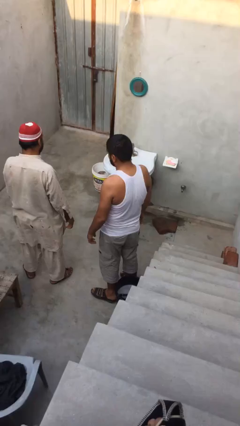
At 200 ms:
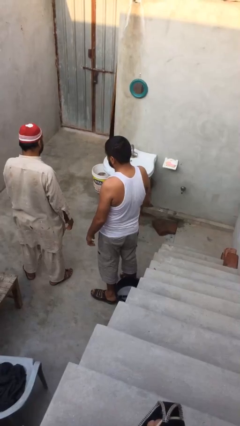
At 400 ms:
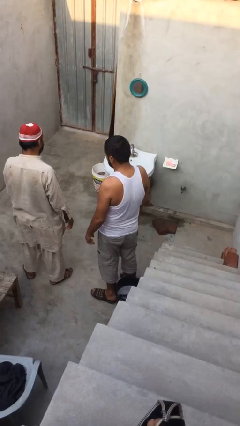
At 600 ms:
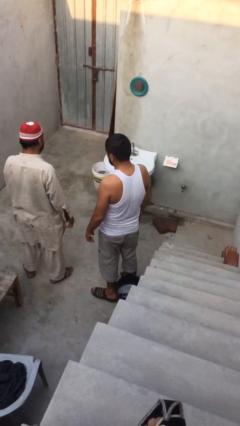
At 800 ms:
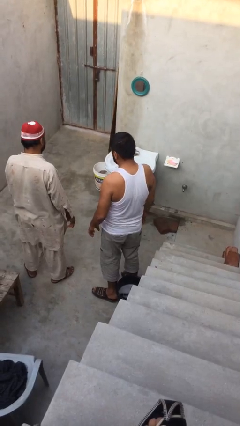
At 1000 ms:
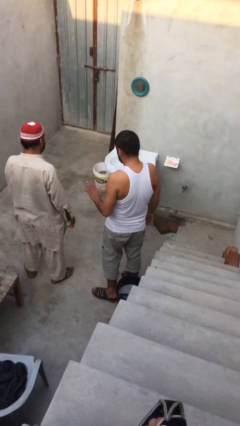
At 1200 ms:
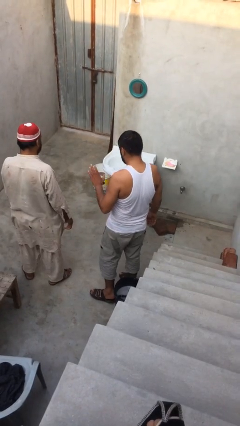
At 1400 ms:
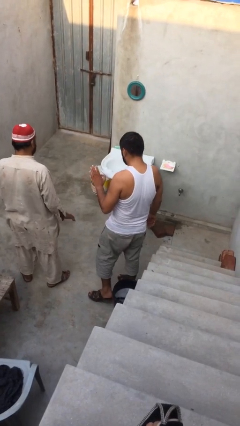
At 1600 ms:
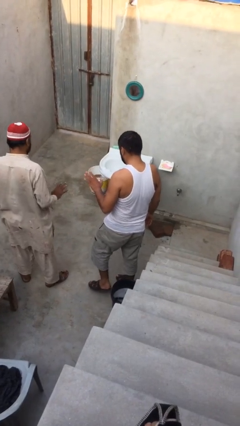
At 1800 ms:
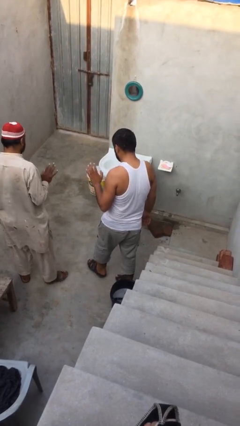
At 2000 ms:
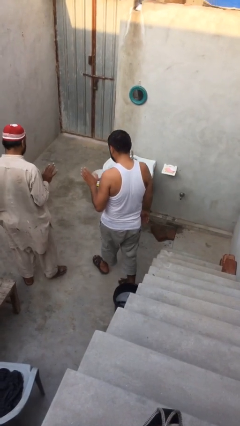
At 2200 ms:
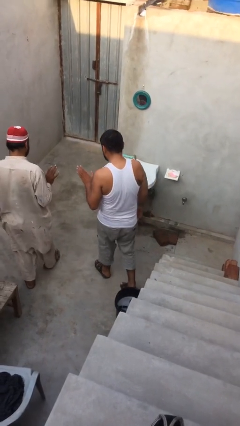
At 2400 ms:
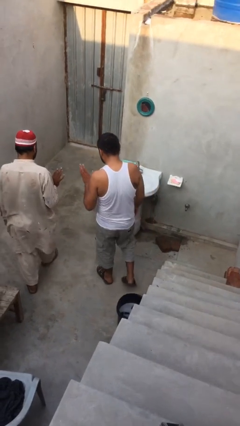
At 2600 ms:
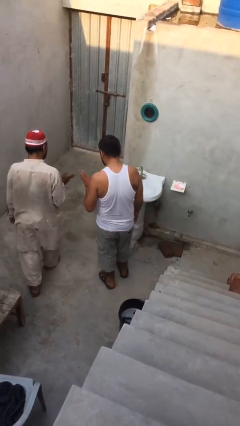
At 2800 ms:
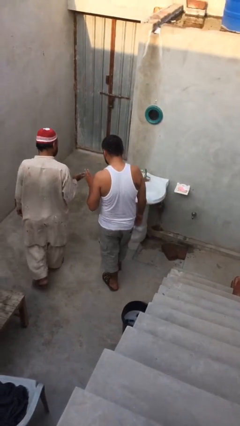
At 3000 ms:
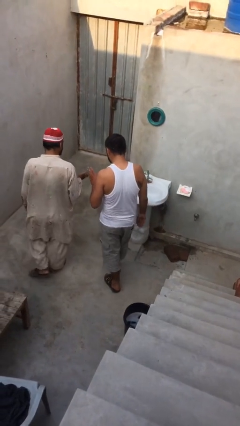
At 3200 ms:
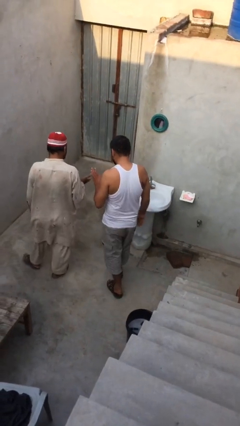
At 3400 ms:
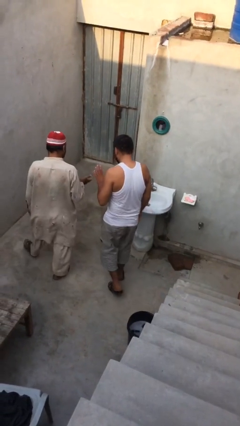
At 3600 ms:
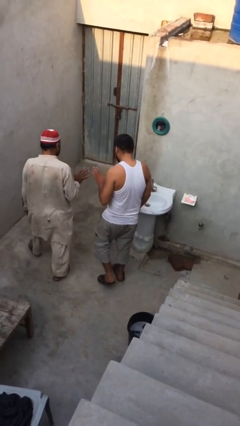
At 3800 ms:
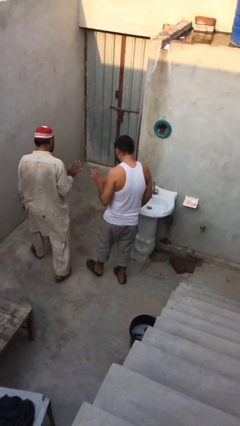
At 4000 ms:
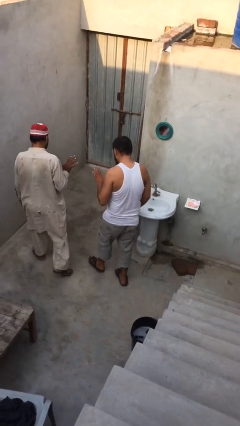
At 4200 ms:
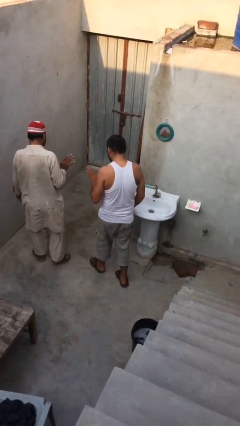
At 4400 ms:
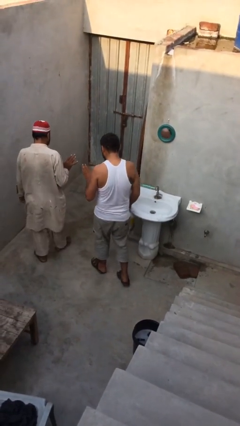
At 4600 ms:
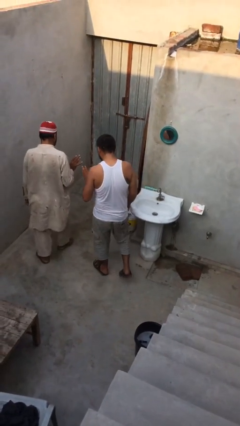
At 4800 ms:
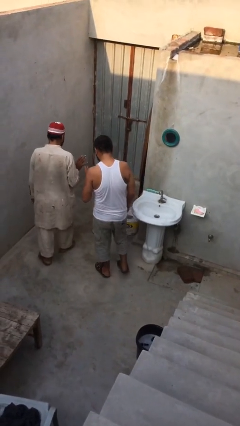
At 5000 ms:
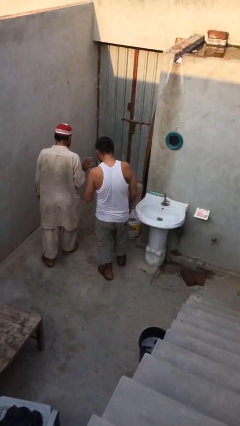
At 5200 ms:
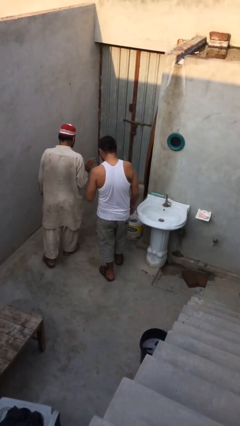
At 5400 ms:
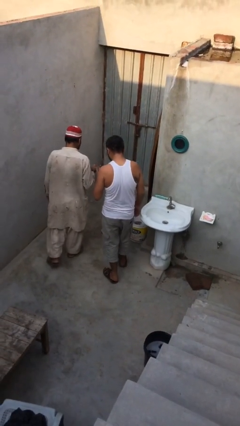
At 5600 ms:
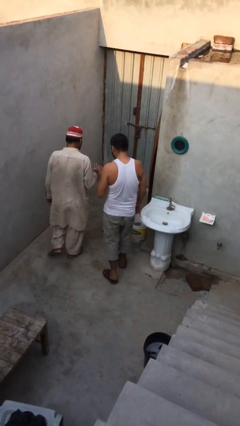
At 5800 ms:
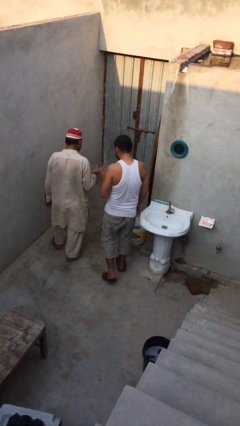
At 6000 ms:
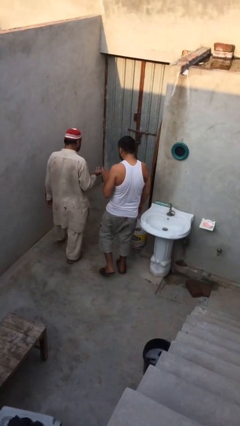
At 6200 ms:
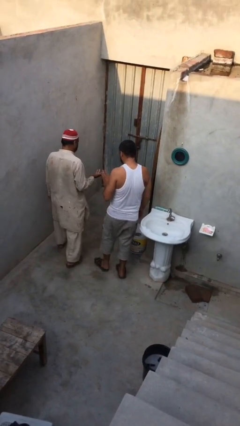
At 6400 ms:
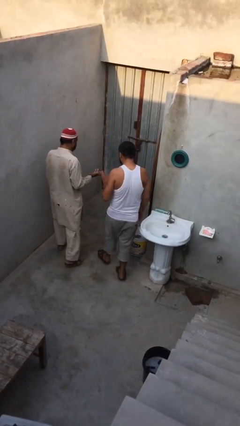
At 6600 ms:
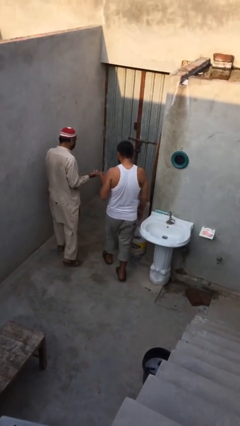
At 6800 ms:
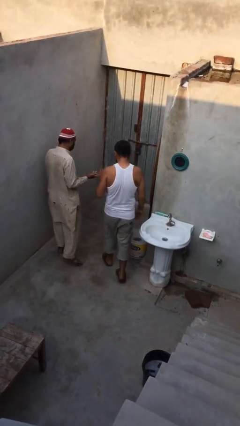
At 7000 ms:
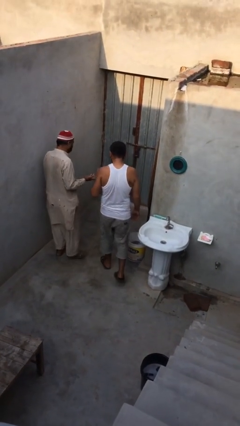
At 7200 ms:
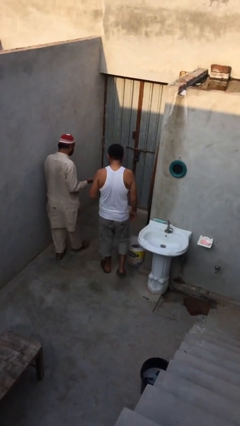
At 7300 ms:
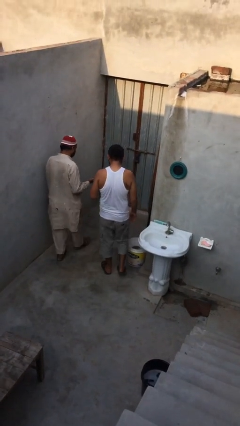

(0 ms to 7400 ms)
person talks to person

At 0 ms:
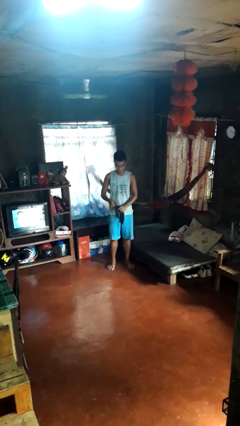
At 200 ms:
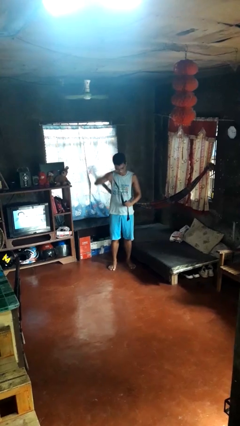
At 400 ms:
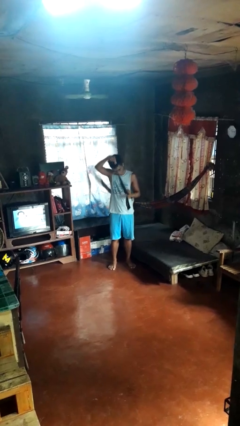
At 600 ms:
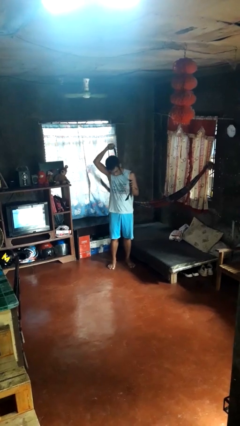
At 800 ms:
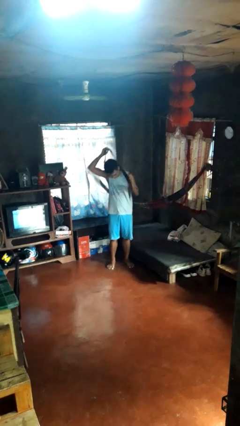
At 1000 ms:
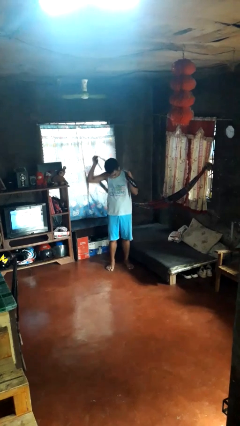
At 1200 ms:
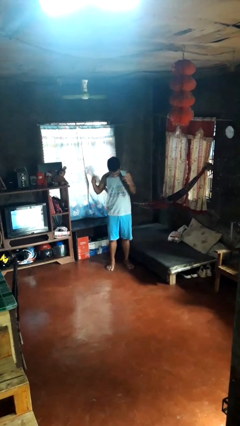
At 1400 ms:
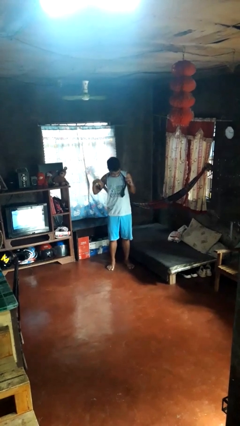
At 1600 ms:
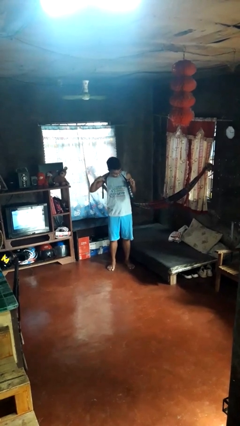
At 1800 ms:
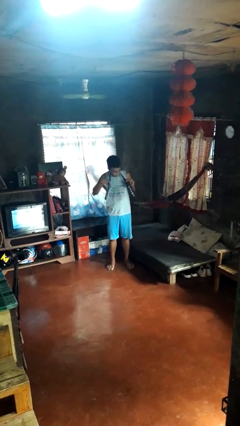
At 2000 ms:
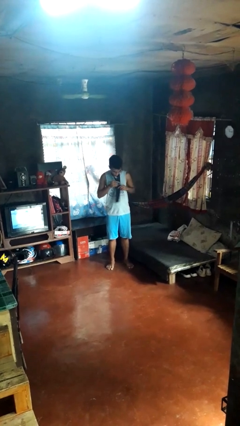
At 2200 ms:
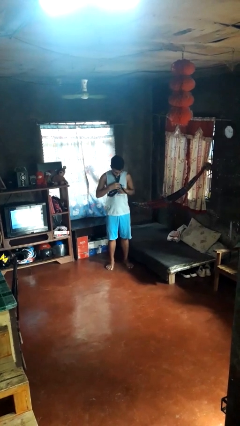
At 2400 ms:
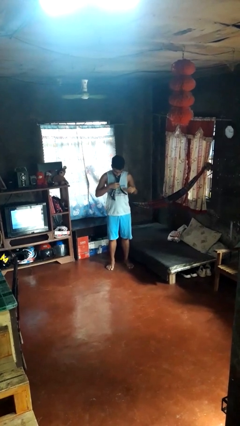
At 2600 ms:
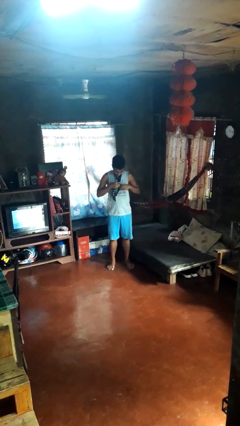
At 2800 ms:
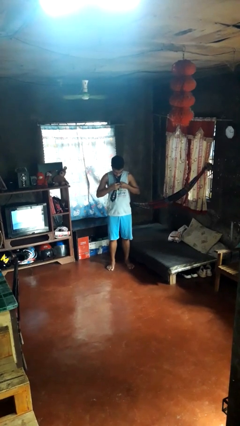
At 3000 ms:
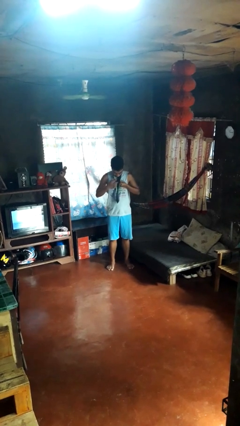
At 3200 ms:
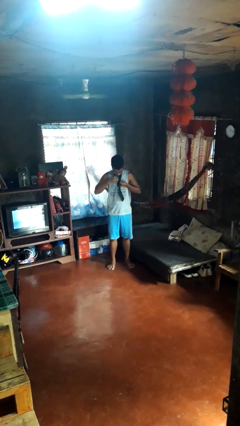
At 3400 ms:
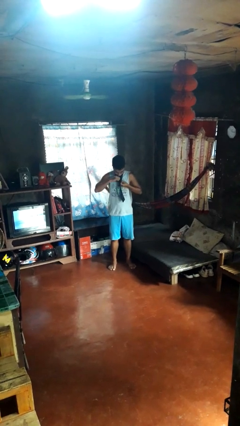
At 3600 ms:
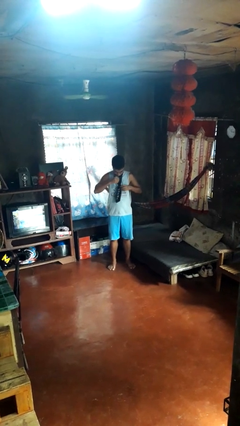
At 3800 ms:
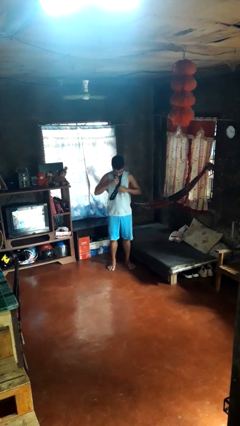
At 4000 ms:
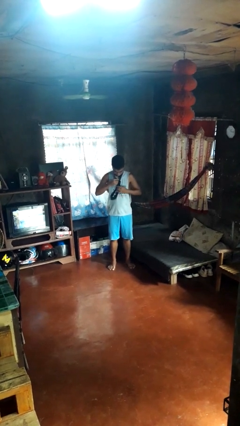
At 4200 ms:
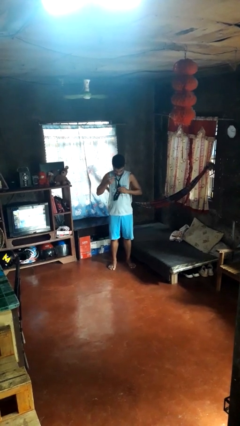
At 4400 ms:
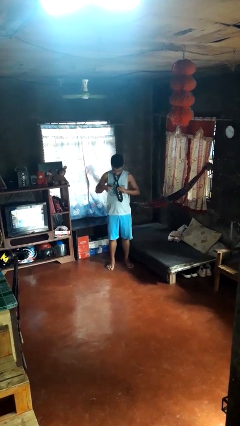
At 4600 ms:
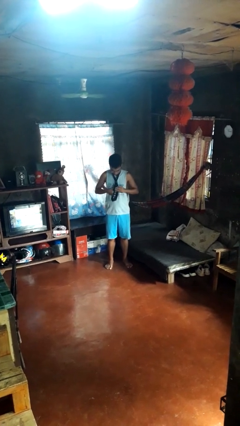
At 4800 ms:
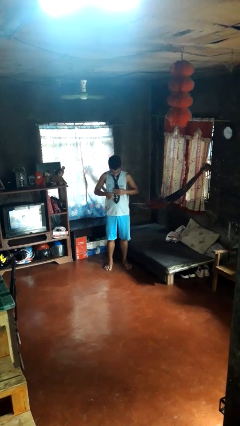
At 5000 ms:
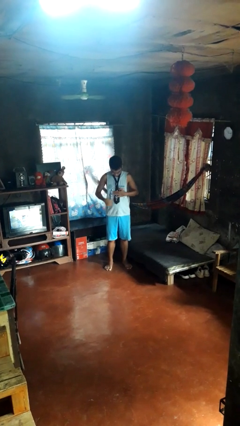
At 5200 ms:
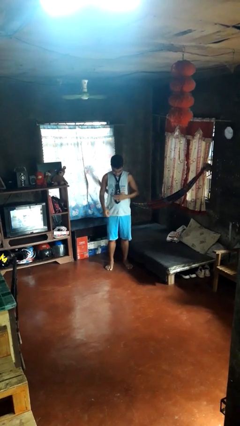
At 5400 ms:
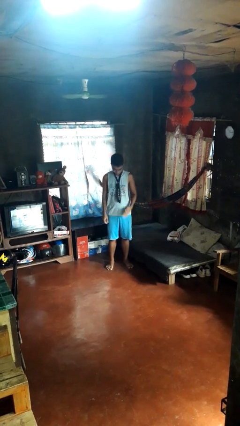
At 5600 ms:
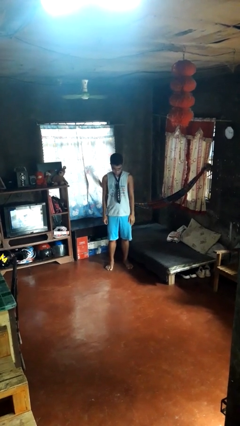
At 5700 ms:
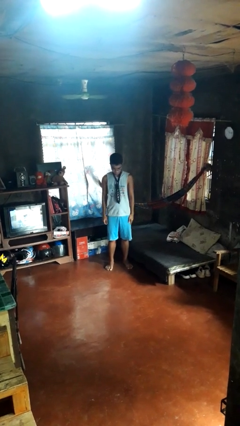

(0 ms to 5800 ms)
person puts on necktie

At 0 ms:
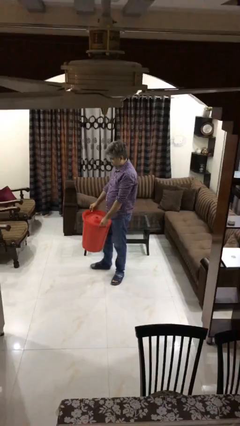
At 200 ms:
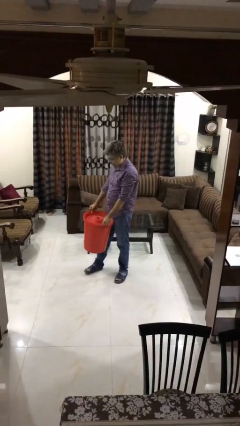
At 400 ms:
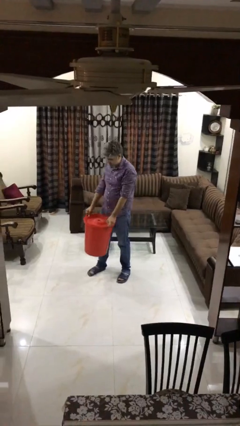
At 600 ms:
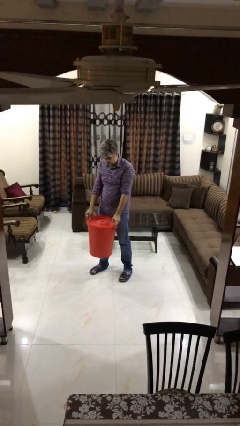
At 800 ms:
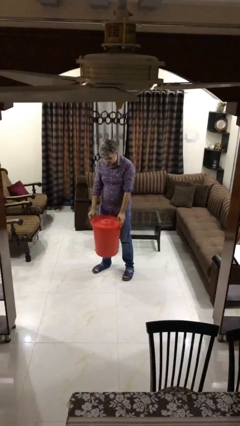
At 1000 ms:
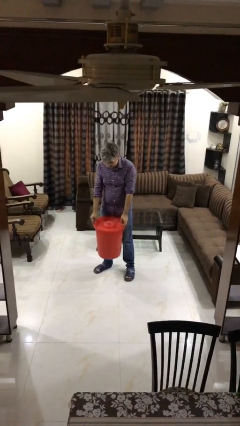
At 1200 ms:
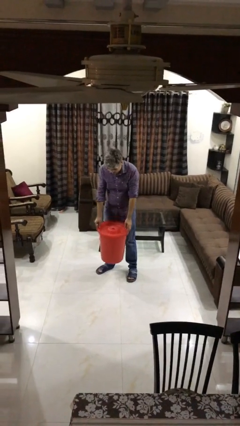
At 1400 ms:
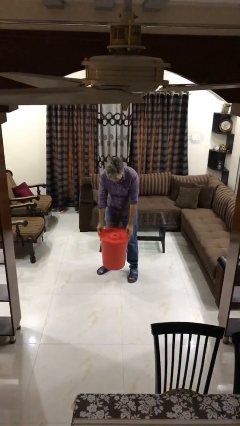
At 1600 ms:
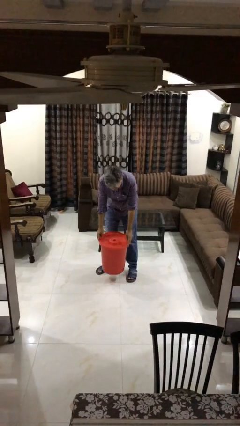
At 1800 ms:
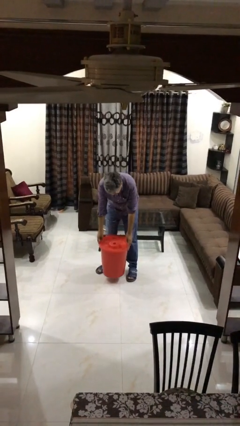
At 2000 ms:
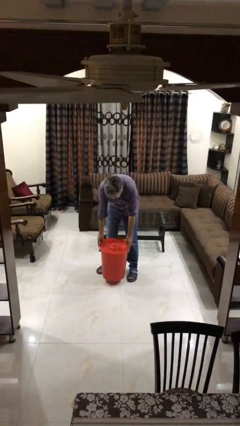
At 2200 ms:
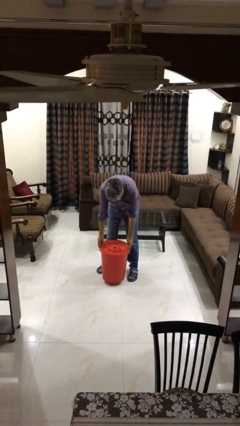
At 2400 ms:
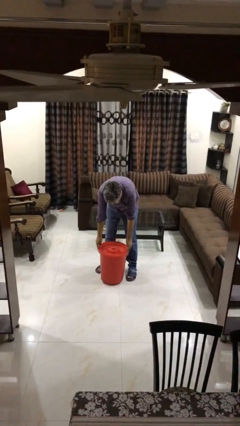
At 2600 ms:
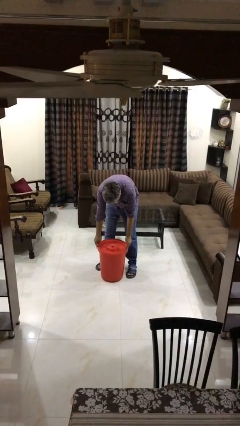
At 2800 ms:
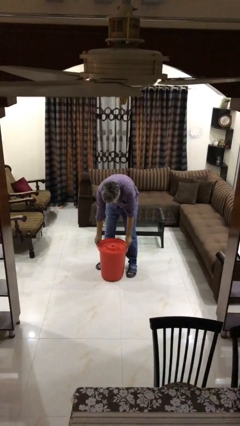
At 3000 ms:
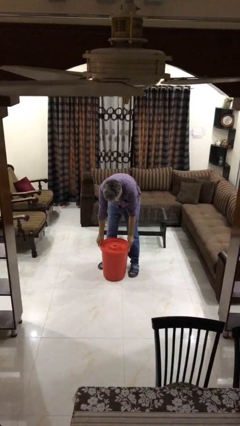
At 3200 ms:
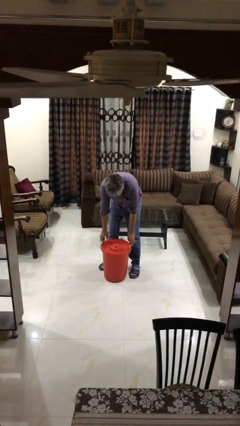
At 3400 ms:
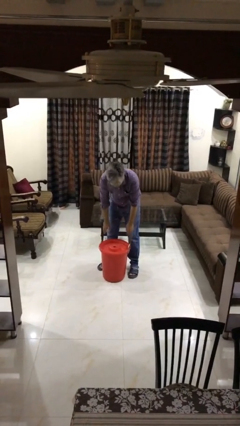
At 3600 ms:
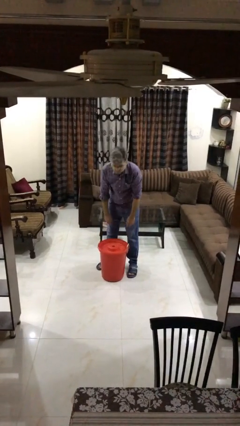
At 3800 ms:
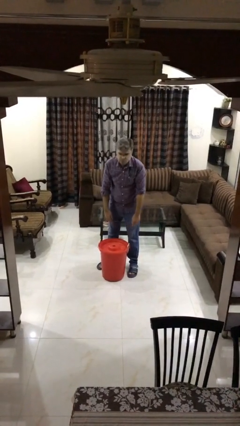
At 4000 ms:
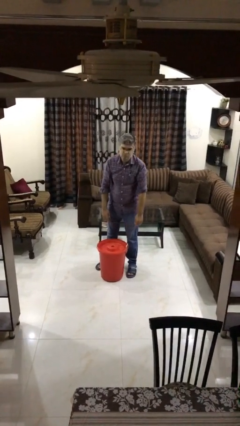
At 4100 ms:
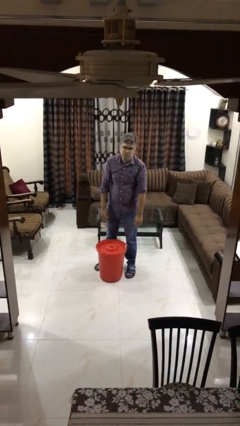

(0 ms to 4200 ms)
person puts down object on floor

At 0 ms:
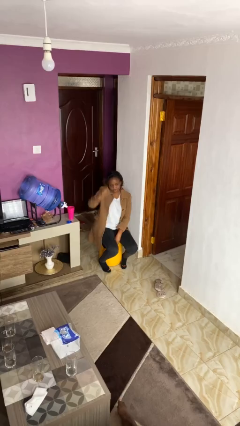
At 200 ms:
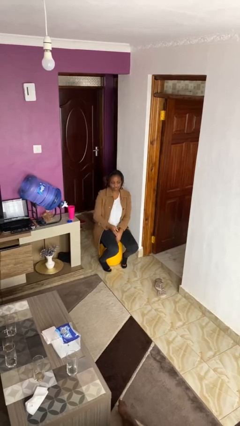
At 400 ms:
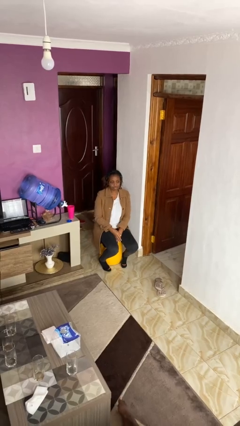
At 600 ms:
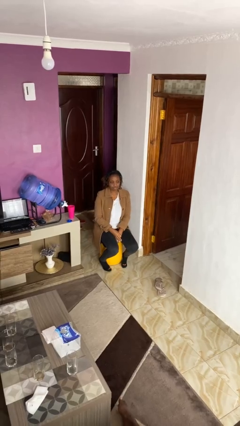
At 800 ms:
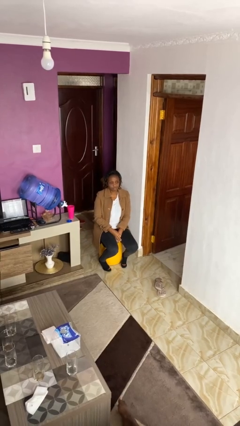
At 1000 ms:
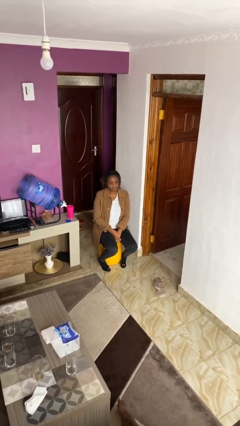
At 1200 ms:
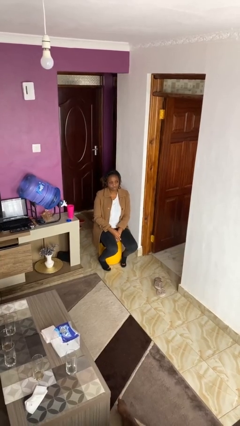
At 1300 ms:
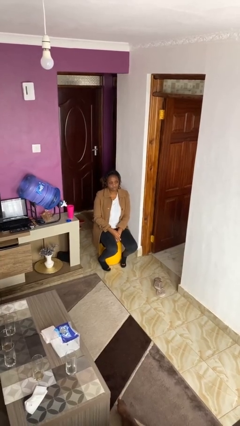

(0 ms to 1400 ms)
person gestures lower hand
